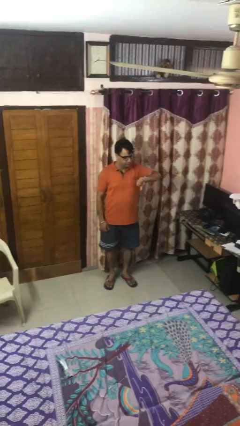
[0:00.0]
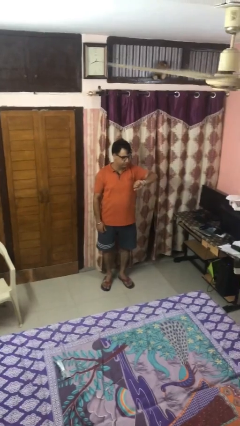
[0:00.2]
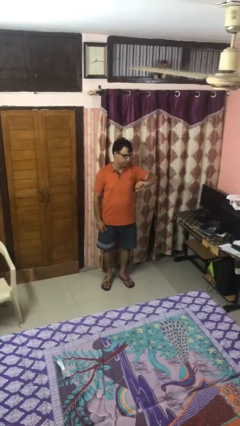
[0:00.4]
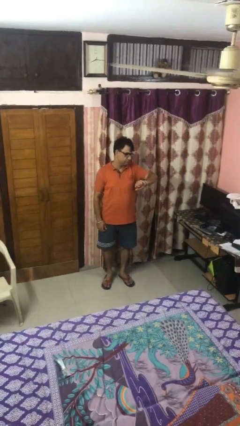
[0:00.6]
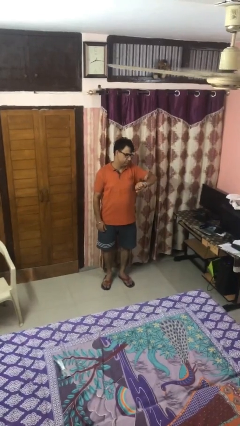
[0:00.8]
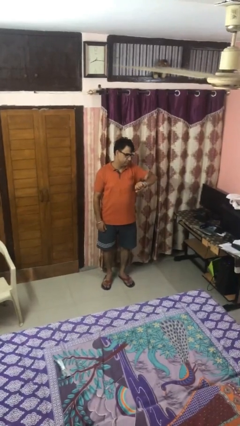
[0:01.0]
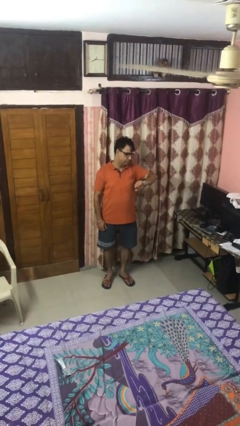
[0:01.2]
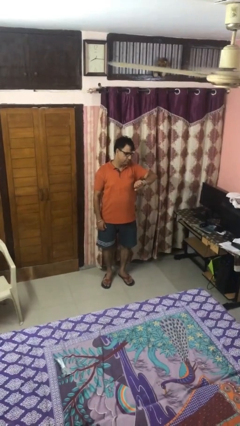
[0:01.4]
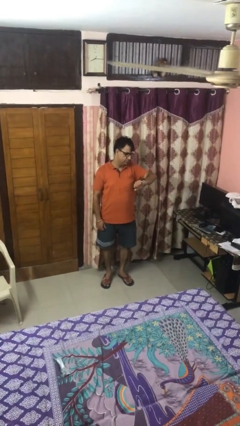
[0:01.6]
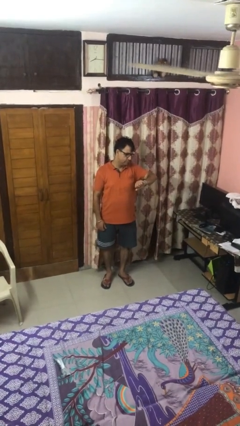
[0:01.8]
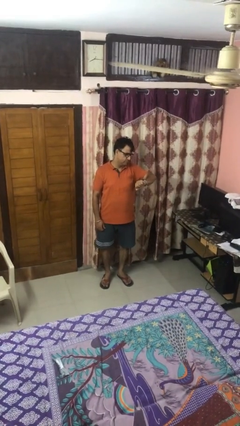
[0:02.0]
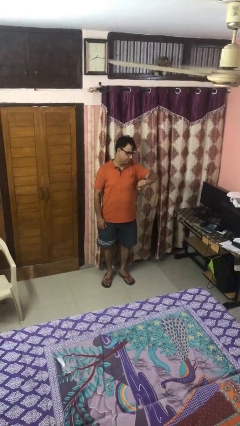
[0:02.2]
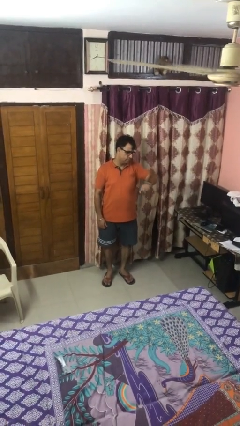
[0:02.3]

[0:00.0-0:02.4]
person looks at wristwatch

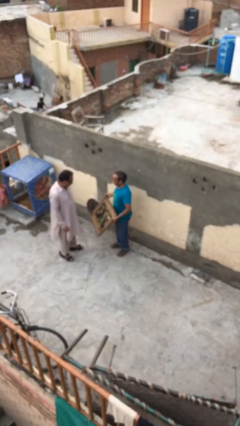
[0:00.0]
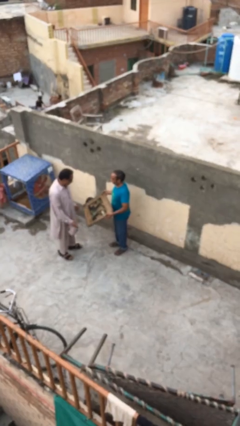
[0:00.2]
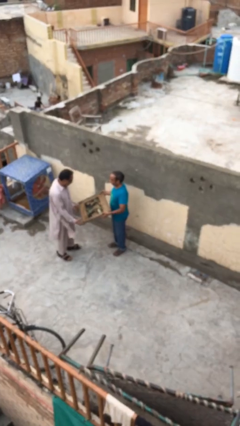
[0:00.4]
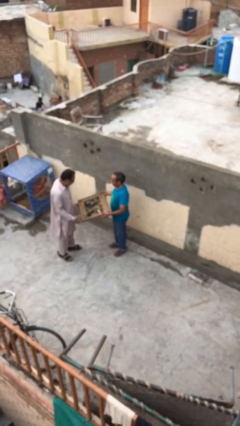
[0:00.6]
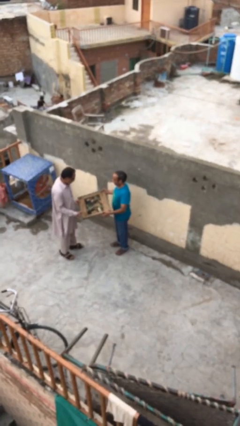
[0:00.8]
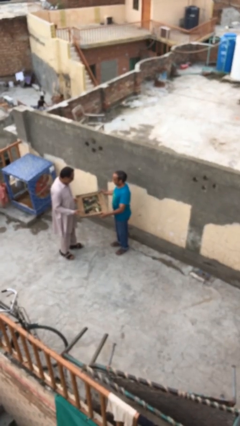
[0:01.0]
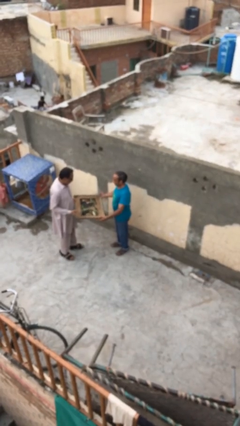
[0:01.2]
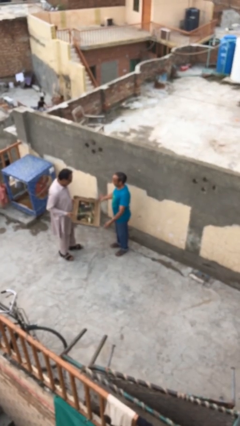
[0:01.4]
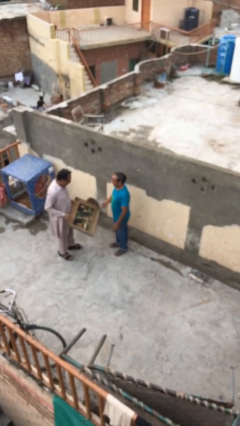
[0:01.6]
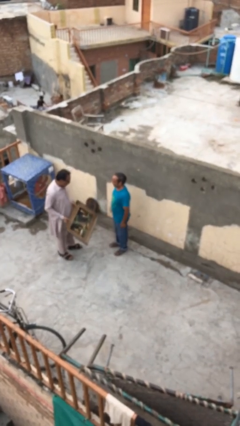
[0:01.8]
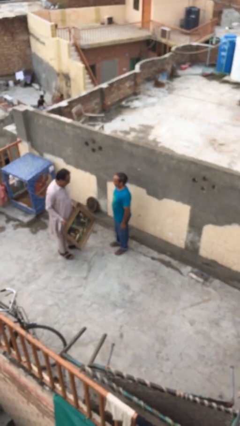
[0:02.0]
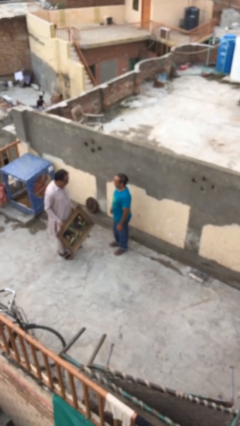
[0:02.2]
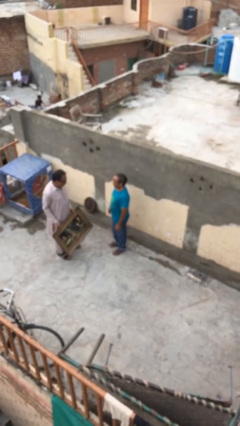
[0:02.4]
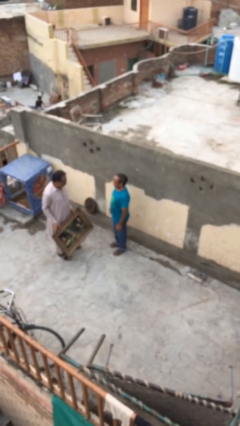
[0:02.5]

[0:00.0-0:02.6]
person transfers object to person

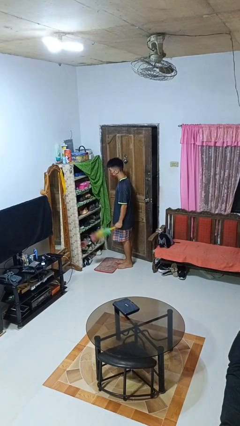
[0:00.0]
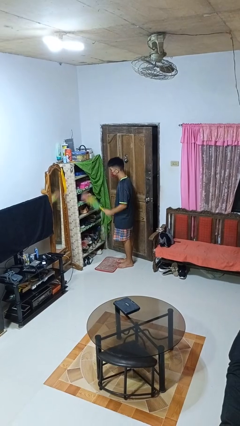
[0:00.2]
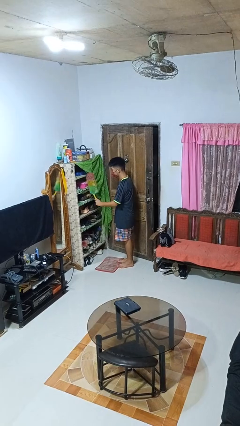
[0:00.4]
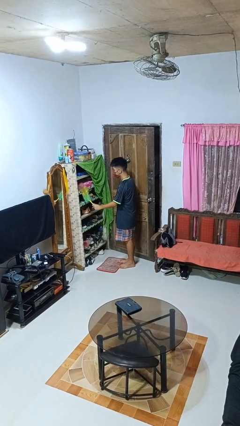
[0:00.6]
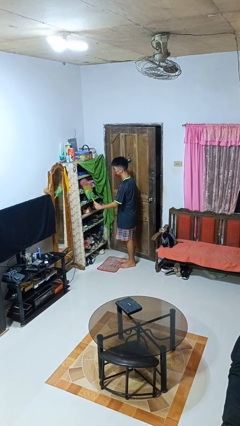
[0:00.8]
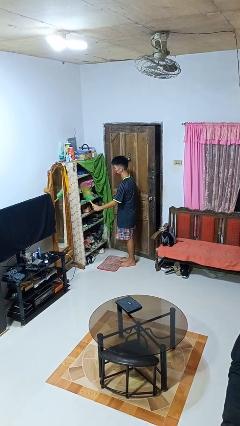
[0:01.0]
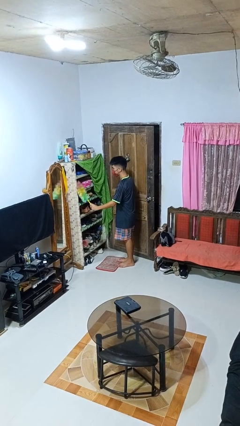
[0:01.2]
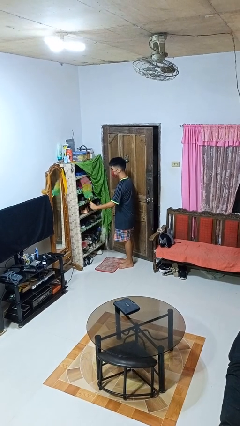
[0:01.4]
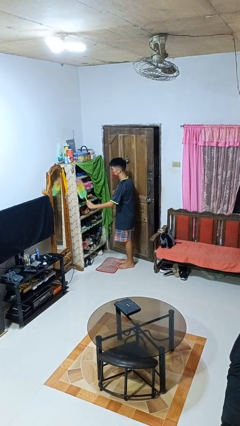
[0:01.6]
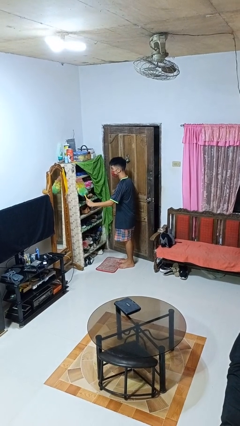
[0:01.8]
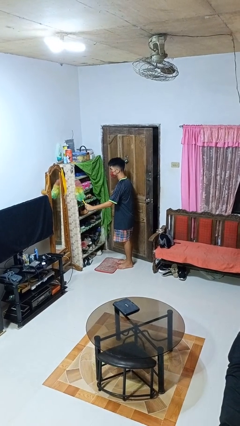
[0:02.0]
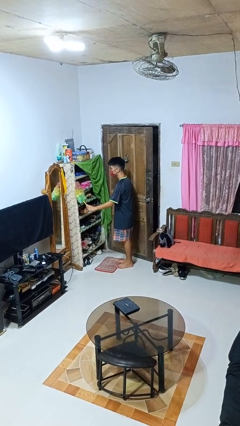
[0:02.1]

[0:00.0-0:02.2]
person dusts furniture

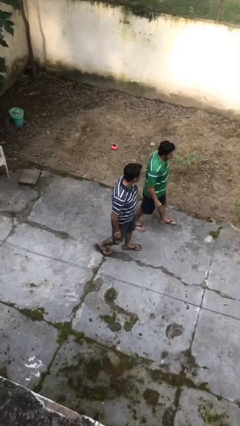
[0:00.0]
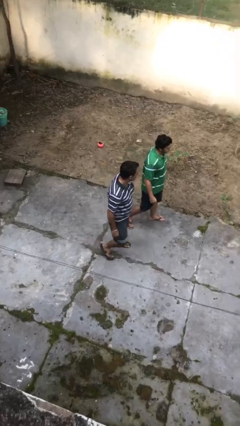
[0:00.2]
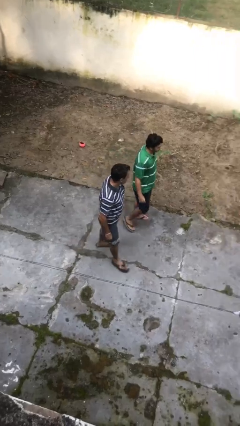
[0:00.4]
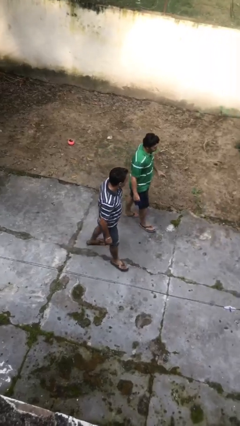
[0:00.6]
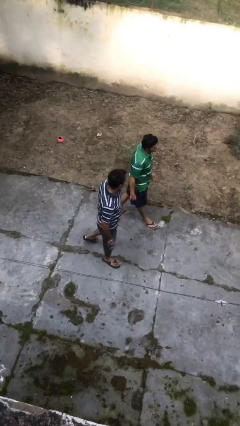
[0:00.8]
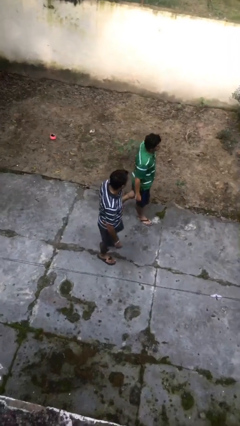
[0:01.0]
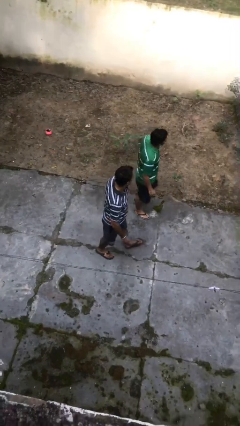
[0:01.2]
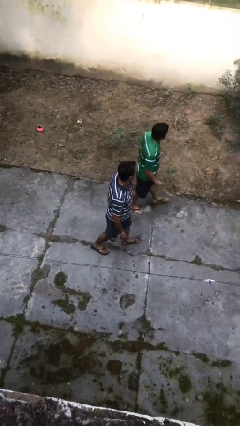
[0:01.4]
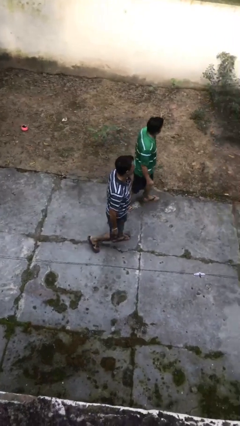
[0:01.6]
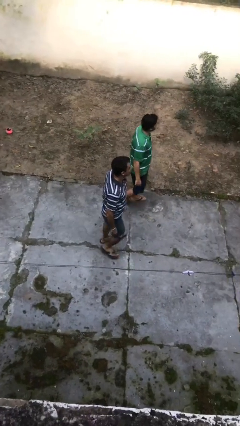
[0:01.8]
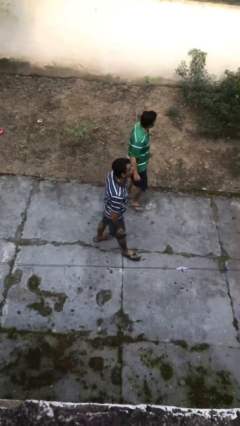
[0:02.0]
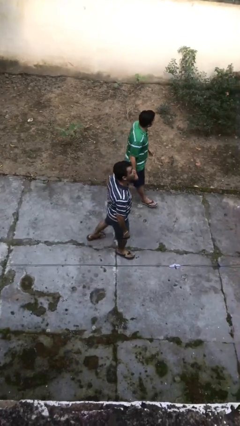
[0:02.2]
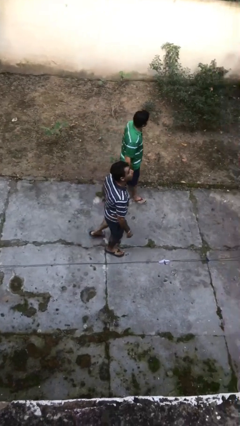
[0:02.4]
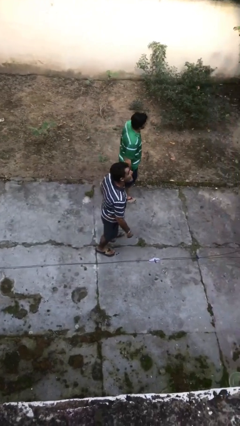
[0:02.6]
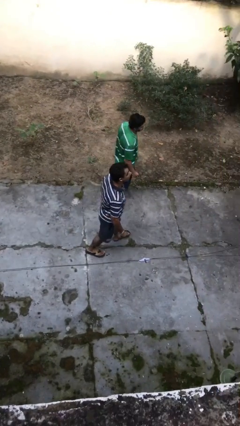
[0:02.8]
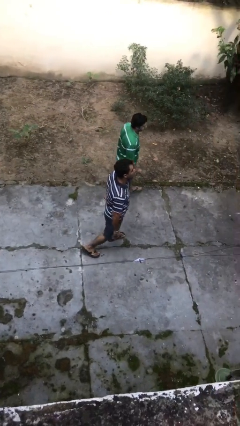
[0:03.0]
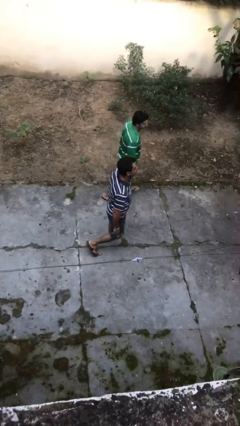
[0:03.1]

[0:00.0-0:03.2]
person talks to person

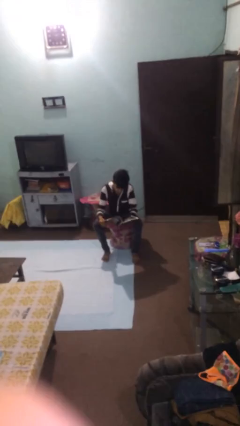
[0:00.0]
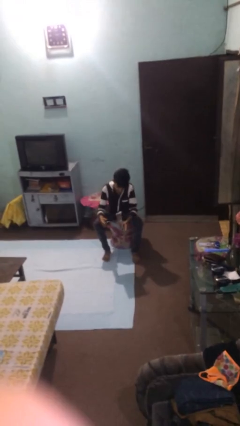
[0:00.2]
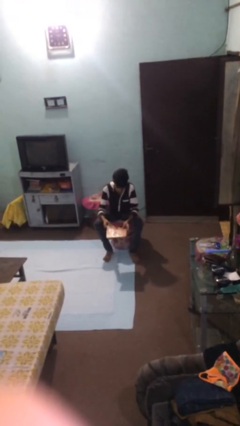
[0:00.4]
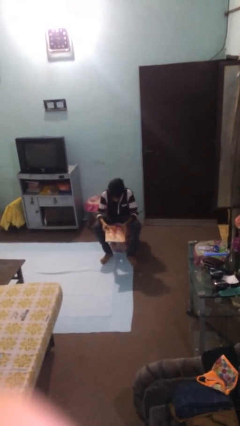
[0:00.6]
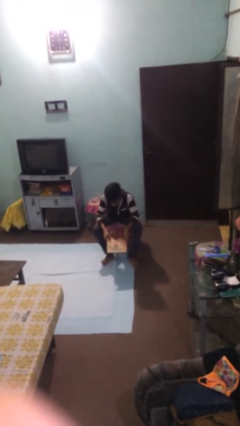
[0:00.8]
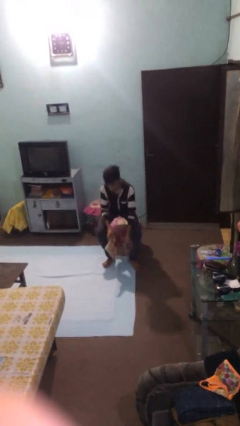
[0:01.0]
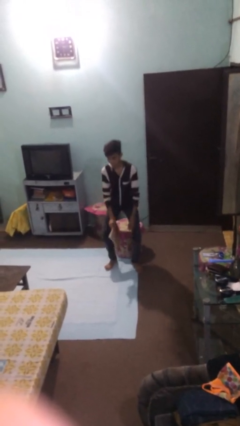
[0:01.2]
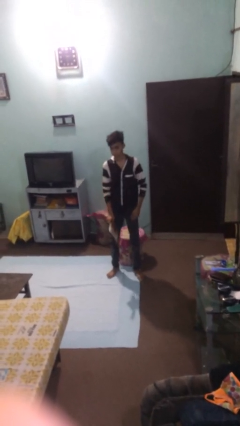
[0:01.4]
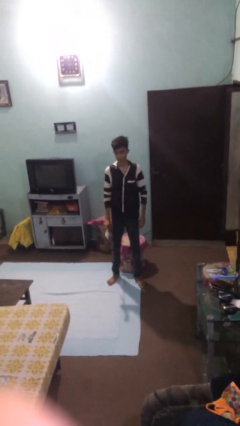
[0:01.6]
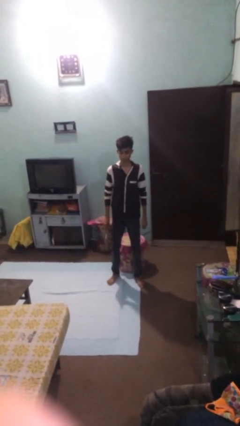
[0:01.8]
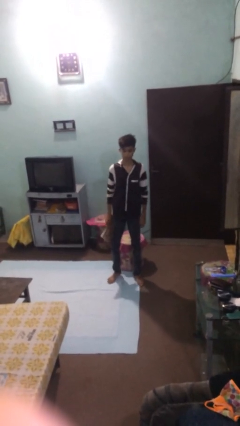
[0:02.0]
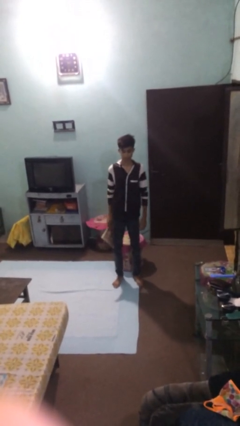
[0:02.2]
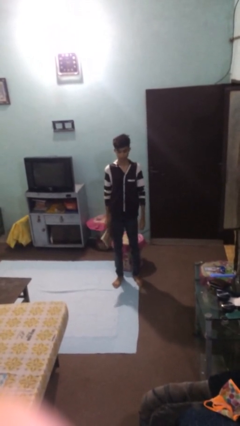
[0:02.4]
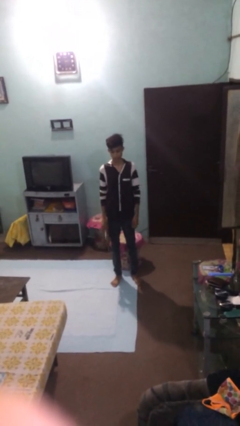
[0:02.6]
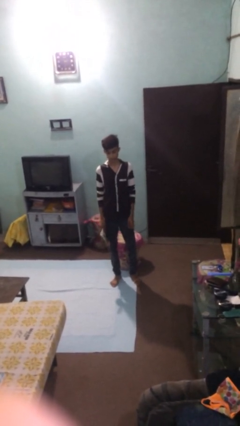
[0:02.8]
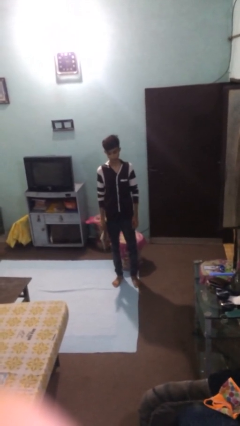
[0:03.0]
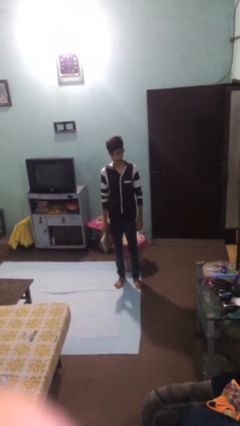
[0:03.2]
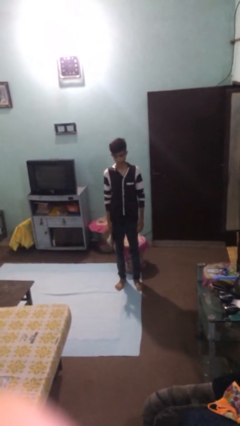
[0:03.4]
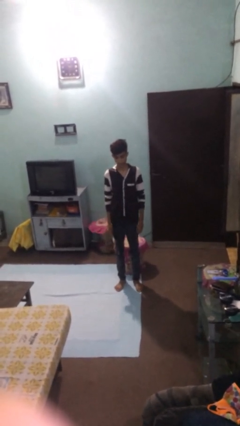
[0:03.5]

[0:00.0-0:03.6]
person stands up

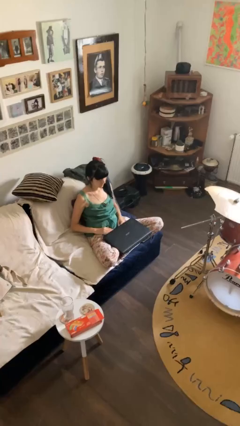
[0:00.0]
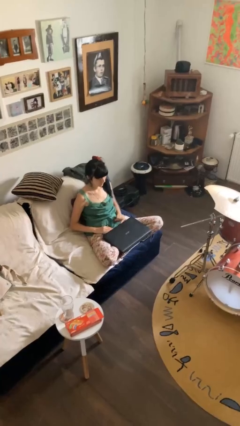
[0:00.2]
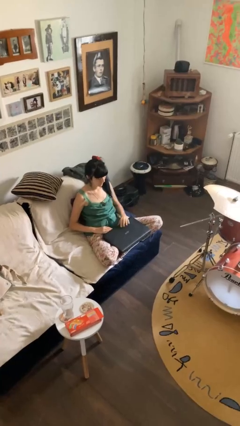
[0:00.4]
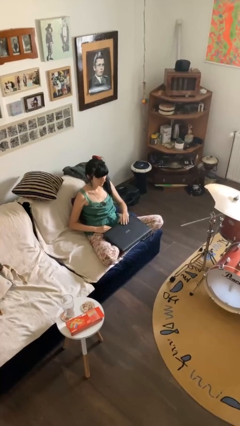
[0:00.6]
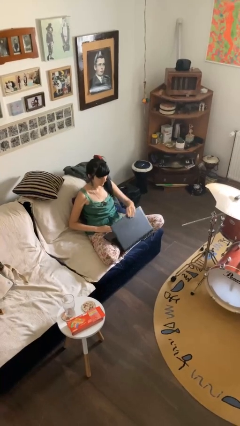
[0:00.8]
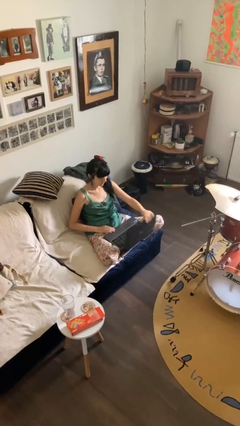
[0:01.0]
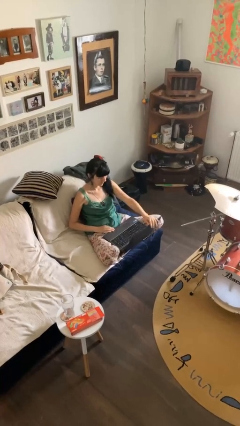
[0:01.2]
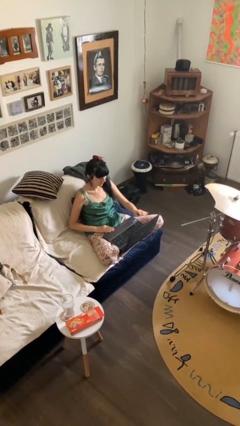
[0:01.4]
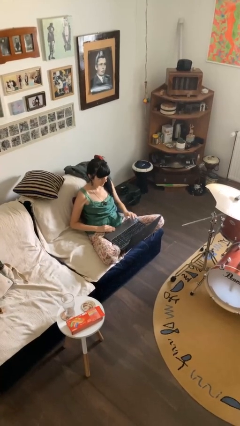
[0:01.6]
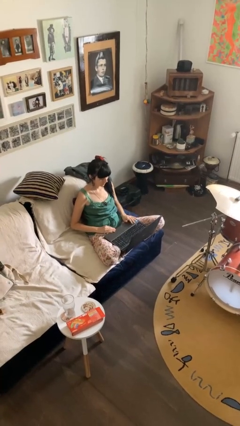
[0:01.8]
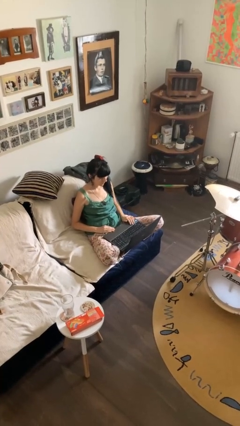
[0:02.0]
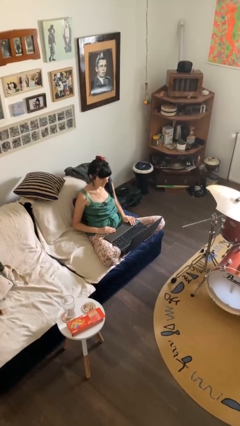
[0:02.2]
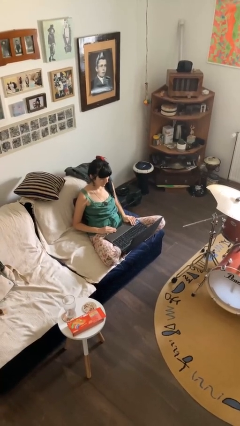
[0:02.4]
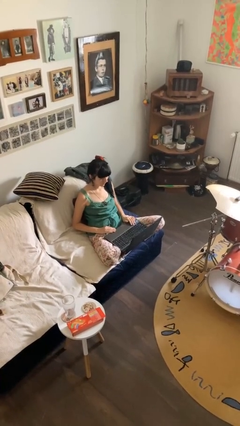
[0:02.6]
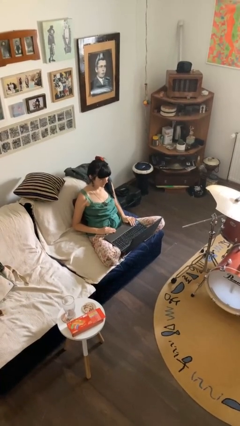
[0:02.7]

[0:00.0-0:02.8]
person opens laptop

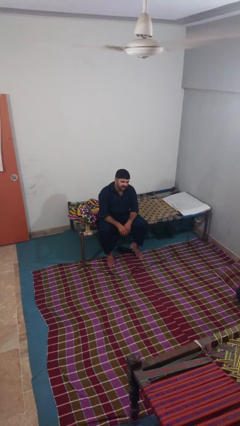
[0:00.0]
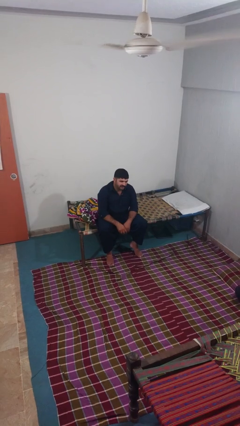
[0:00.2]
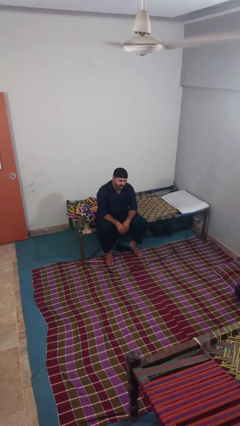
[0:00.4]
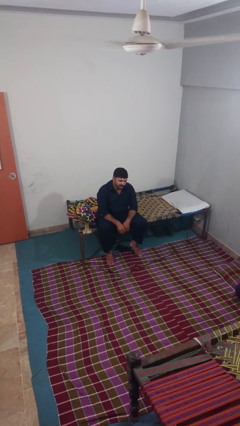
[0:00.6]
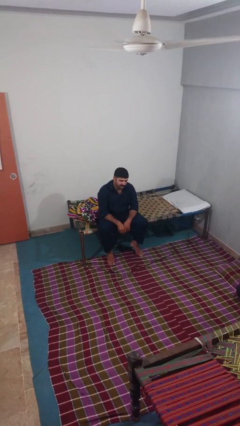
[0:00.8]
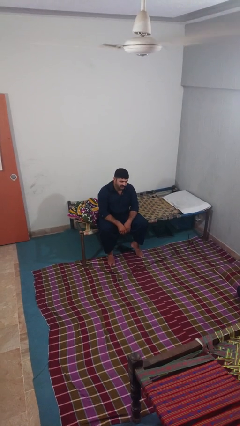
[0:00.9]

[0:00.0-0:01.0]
person gestures swipe down
